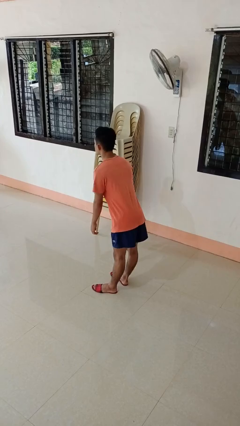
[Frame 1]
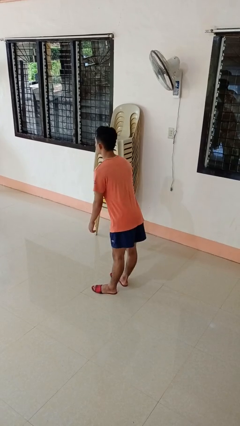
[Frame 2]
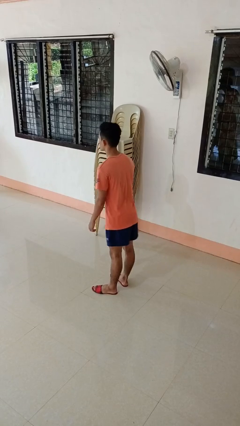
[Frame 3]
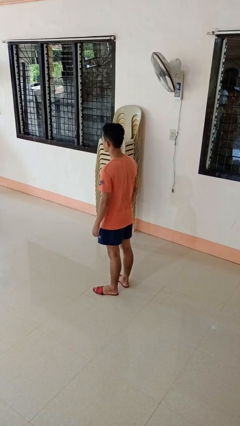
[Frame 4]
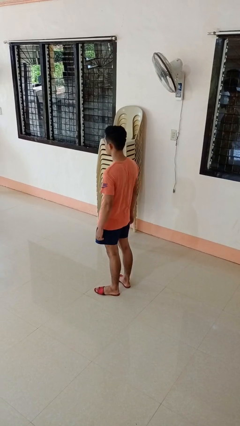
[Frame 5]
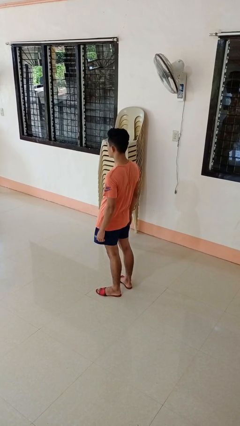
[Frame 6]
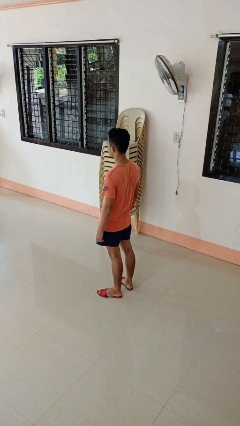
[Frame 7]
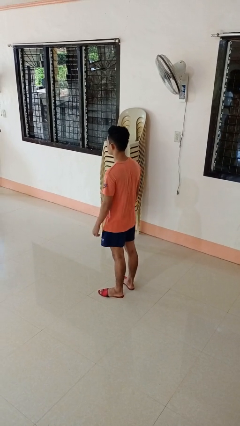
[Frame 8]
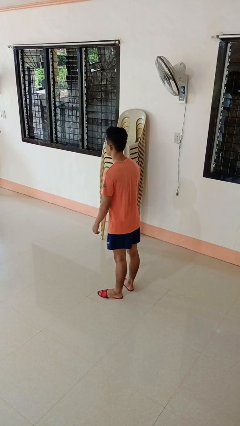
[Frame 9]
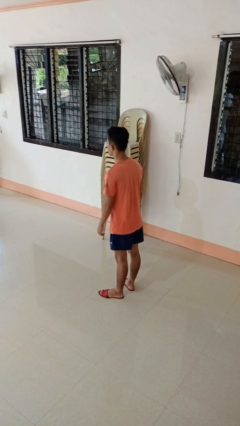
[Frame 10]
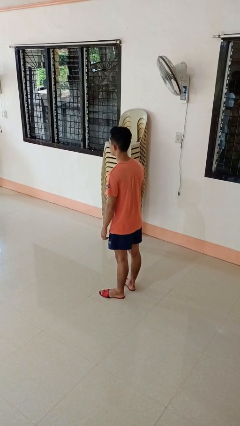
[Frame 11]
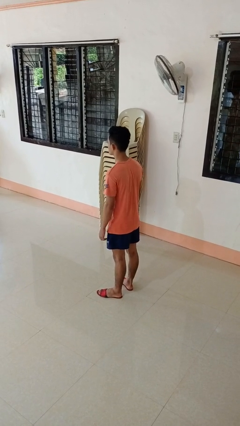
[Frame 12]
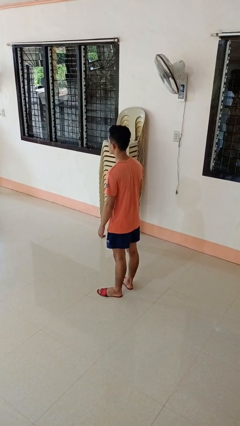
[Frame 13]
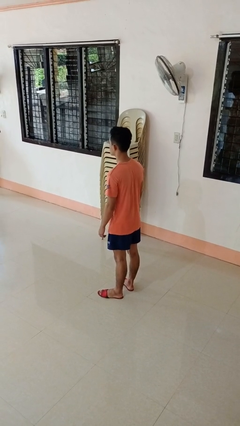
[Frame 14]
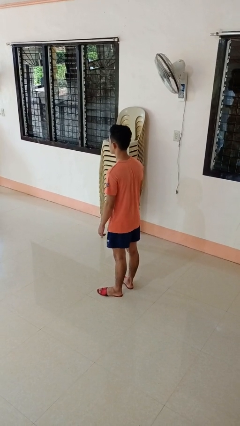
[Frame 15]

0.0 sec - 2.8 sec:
person wiggles hips

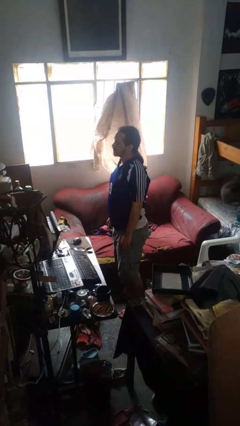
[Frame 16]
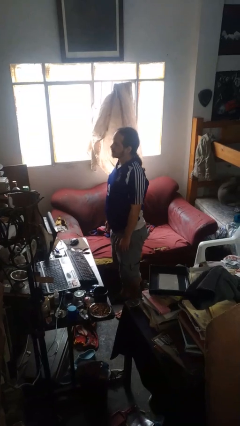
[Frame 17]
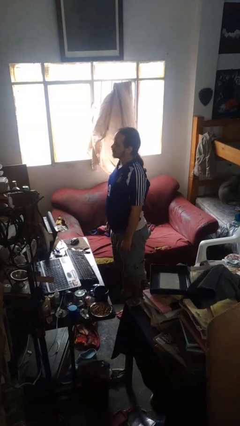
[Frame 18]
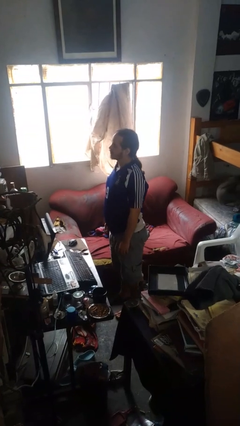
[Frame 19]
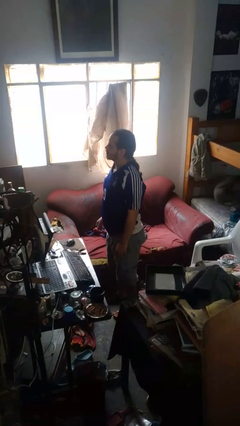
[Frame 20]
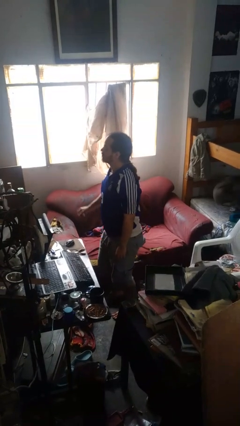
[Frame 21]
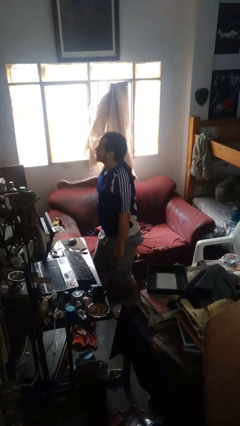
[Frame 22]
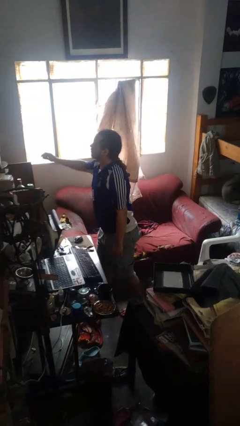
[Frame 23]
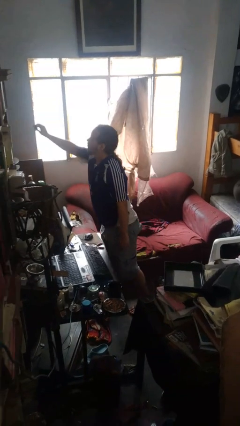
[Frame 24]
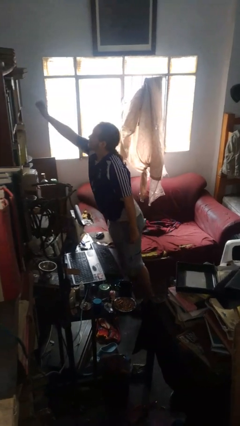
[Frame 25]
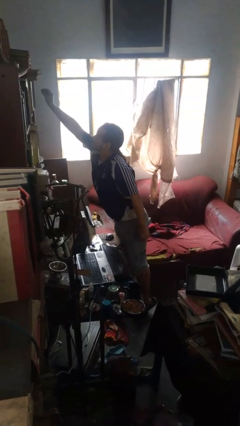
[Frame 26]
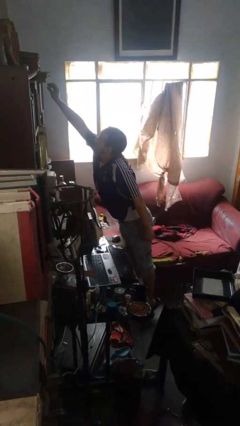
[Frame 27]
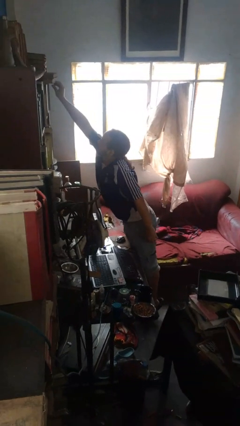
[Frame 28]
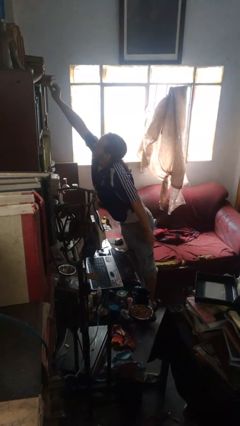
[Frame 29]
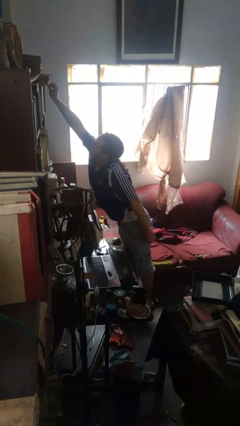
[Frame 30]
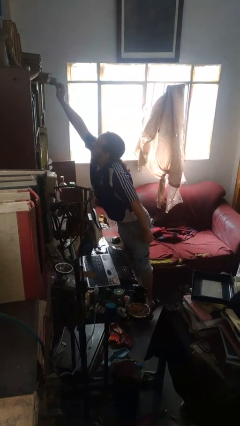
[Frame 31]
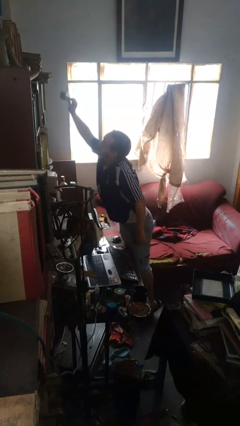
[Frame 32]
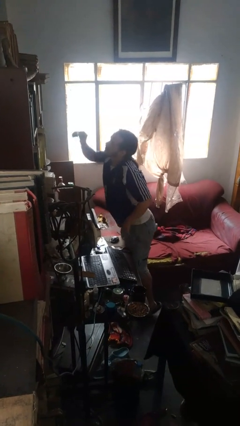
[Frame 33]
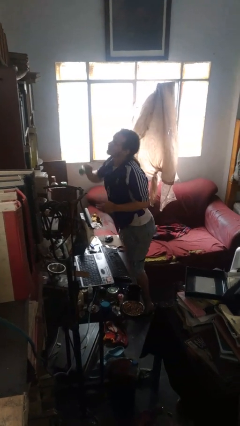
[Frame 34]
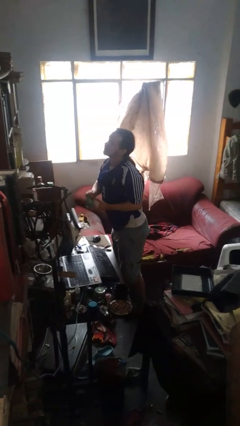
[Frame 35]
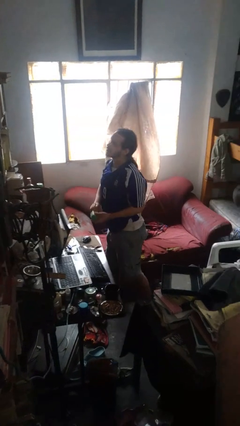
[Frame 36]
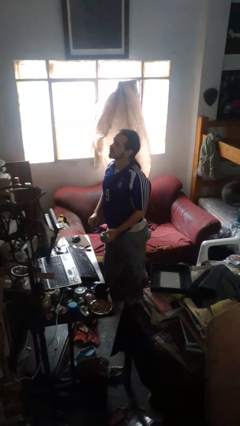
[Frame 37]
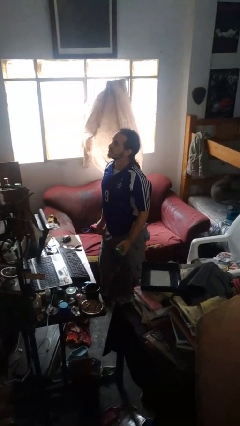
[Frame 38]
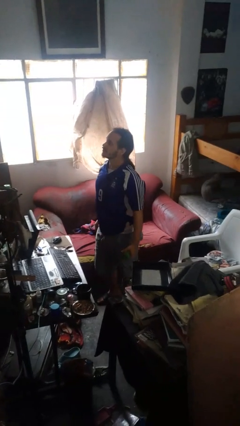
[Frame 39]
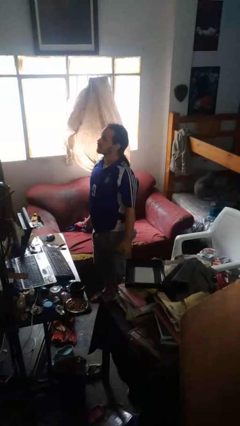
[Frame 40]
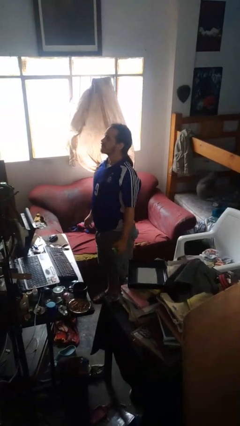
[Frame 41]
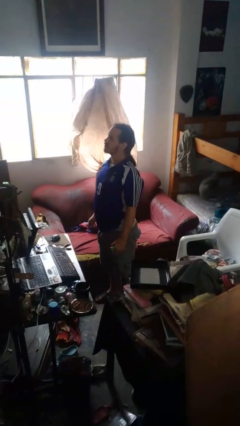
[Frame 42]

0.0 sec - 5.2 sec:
person picks up object from shelf

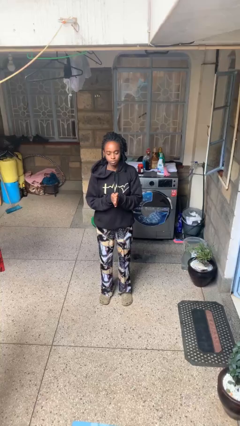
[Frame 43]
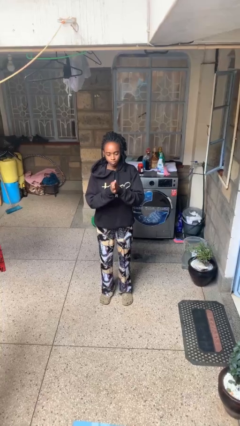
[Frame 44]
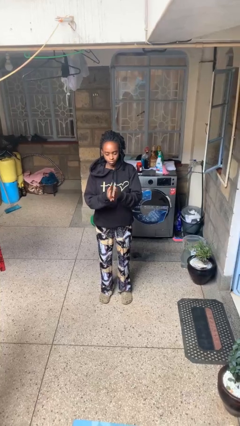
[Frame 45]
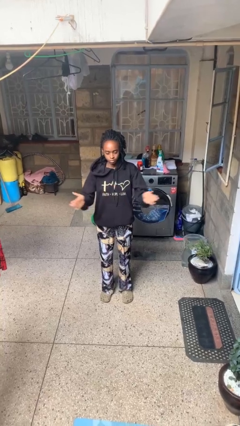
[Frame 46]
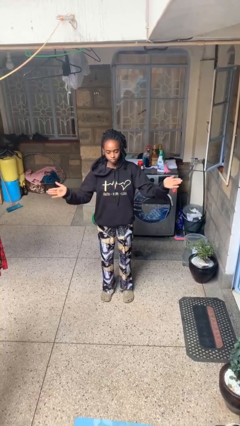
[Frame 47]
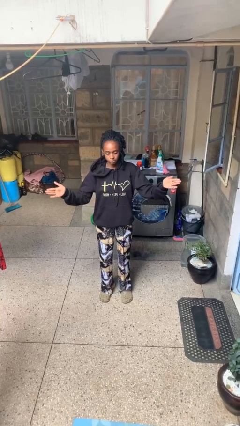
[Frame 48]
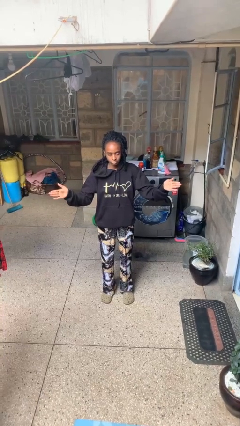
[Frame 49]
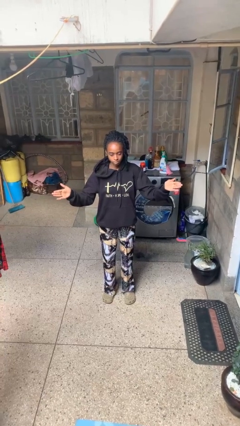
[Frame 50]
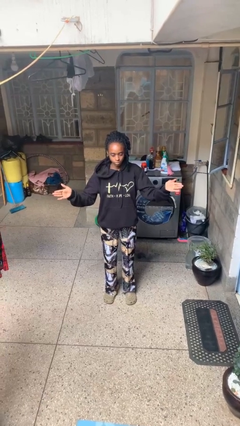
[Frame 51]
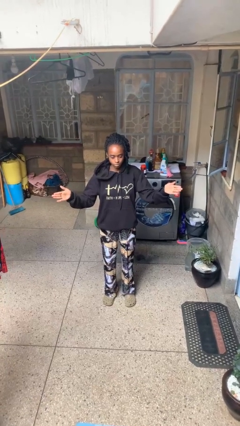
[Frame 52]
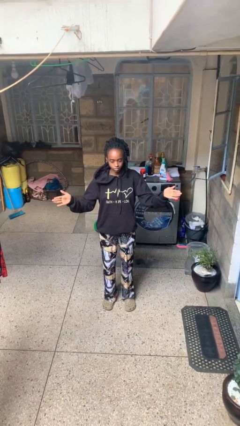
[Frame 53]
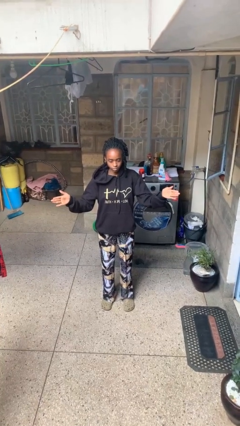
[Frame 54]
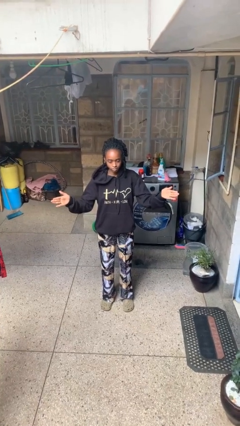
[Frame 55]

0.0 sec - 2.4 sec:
person gestures zoom in

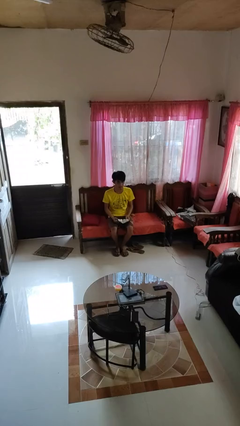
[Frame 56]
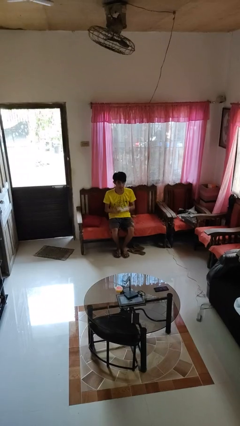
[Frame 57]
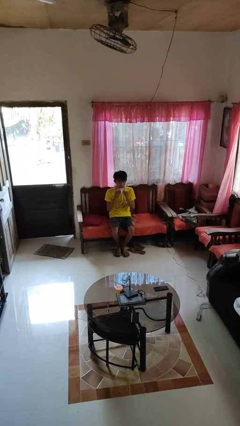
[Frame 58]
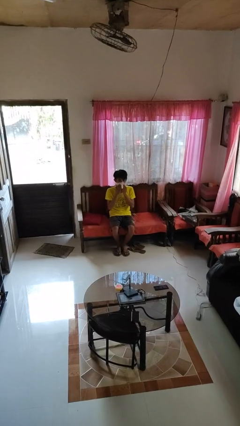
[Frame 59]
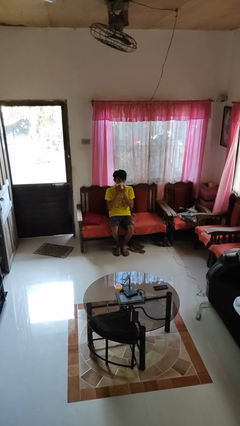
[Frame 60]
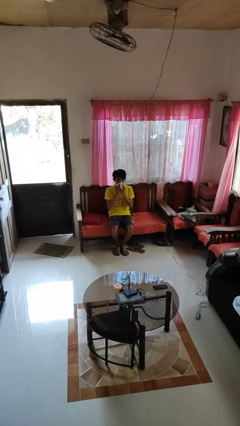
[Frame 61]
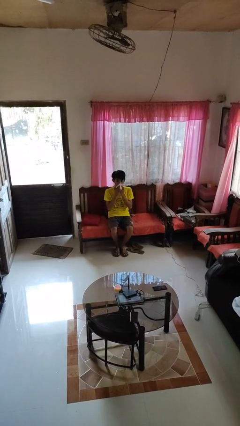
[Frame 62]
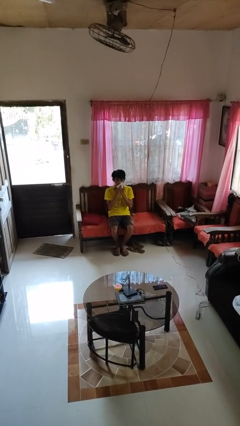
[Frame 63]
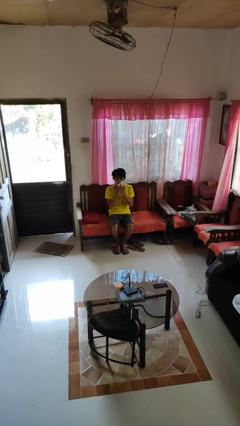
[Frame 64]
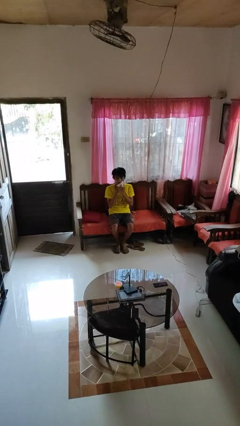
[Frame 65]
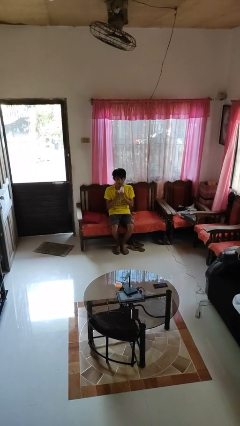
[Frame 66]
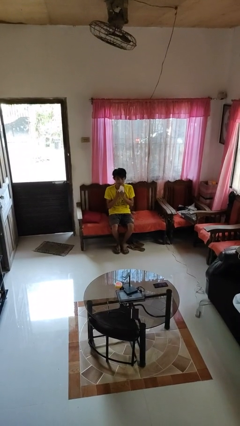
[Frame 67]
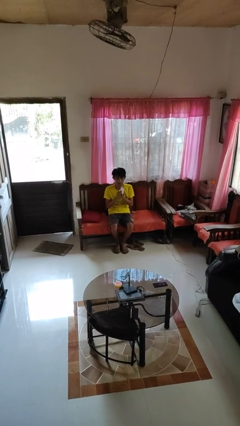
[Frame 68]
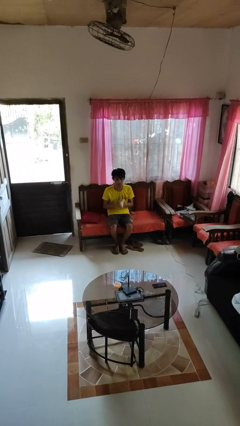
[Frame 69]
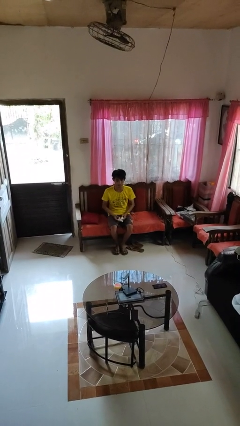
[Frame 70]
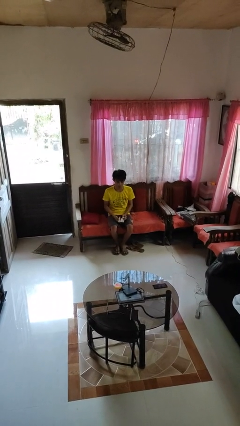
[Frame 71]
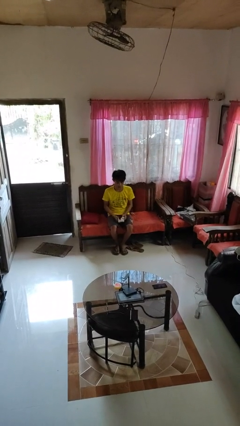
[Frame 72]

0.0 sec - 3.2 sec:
person wipes mouth with napkin

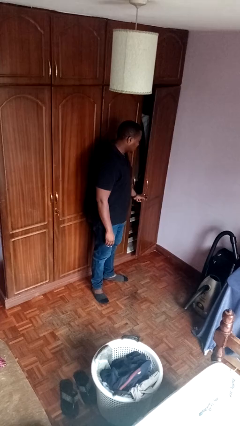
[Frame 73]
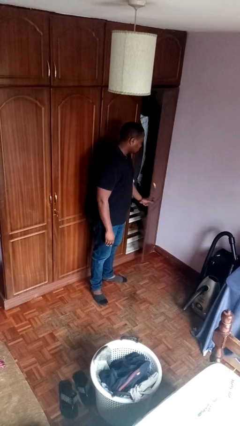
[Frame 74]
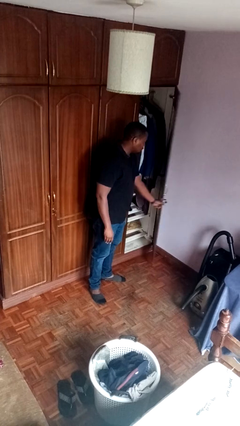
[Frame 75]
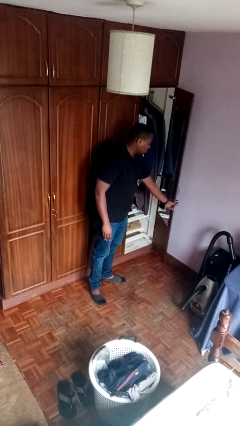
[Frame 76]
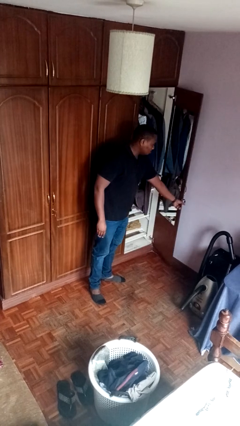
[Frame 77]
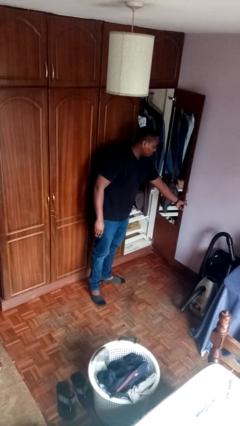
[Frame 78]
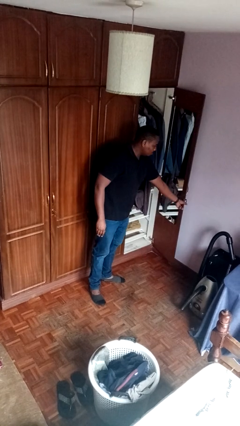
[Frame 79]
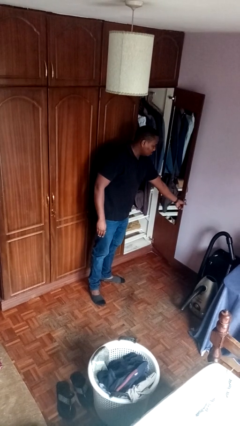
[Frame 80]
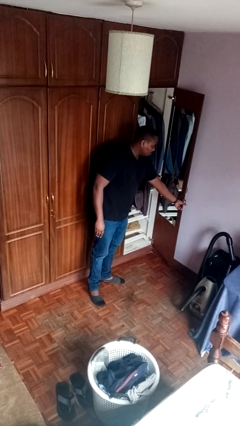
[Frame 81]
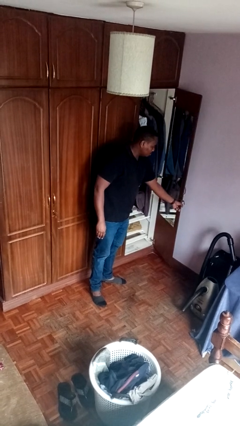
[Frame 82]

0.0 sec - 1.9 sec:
person opens closet door

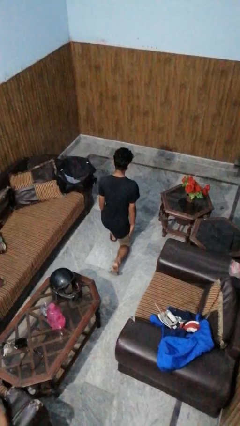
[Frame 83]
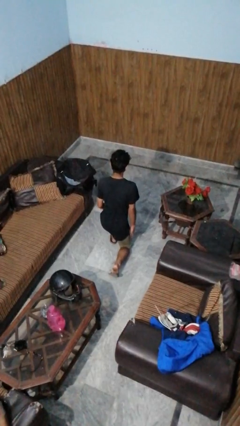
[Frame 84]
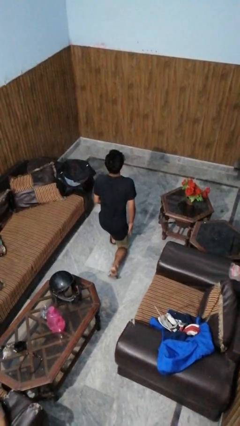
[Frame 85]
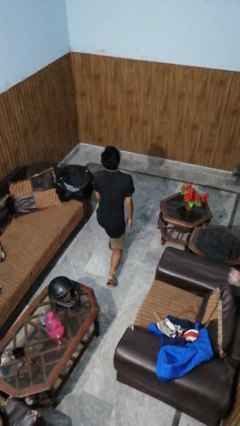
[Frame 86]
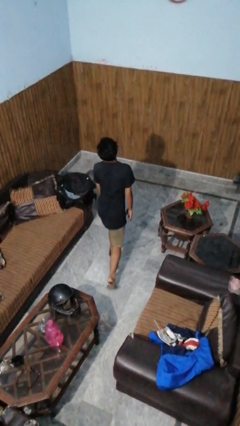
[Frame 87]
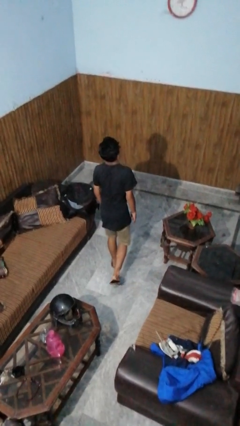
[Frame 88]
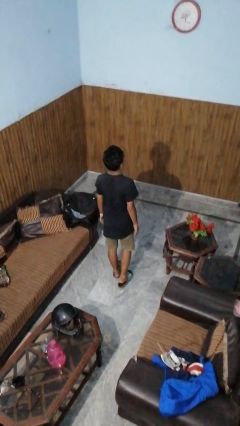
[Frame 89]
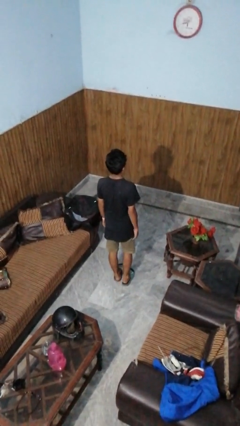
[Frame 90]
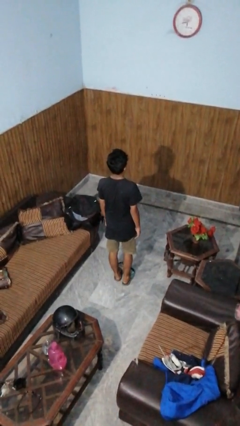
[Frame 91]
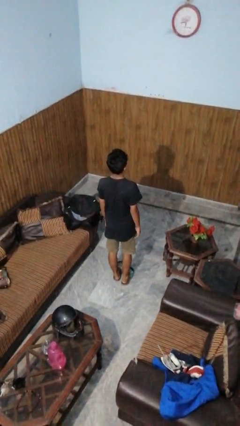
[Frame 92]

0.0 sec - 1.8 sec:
person stands up from floor
